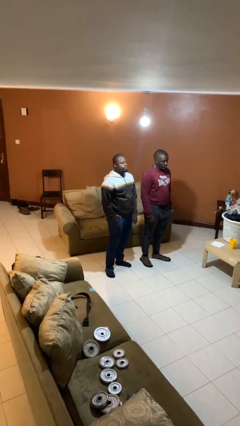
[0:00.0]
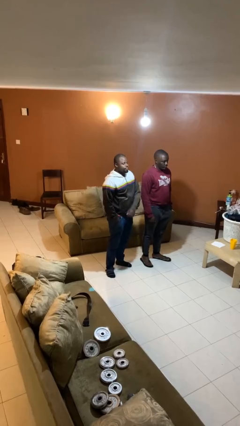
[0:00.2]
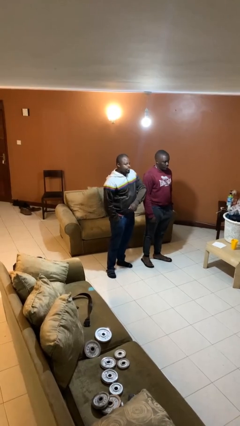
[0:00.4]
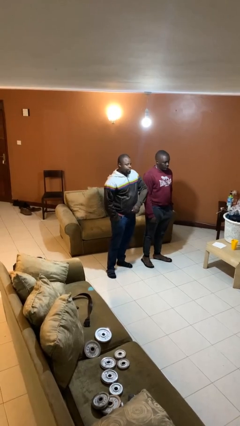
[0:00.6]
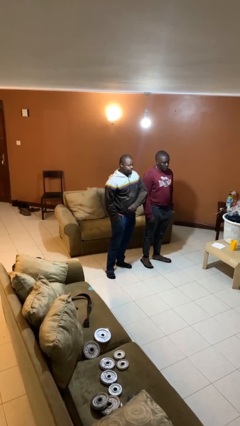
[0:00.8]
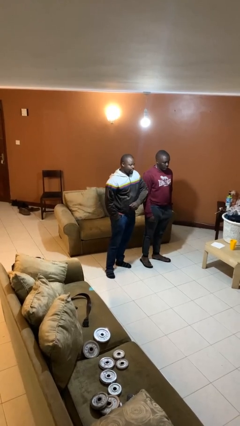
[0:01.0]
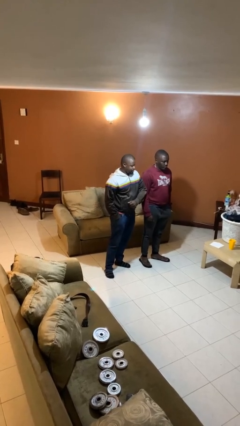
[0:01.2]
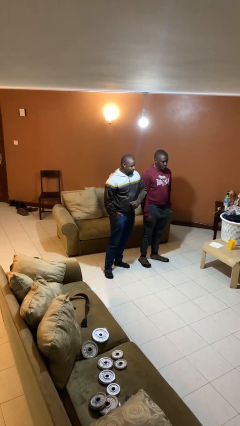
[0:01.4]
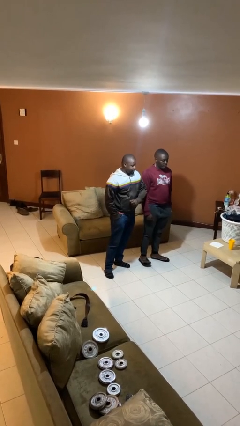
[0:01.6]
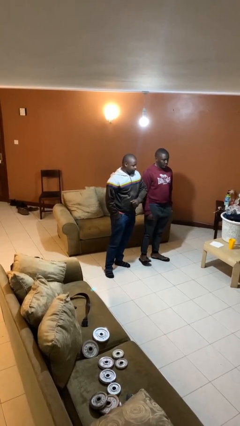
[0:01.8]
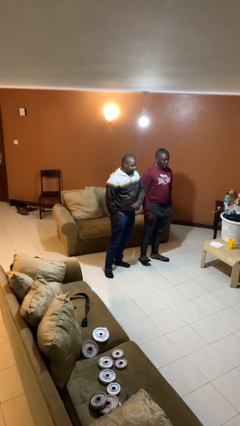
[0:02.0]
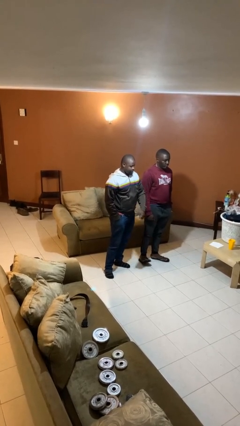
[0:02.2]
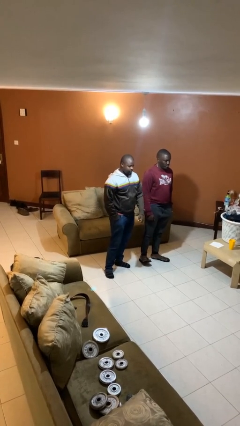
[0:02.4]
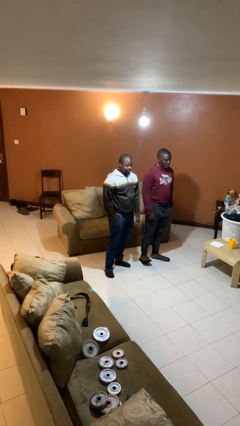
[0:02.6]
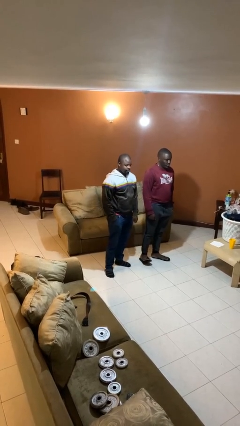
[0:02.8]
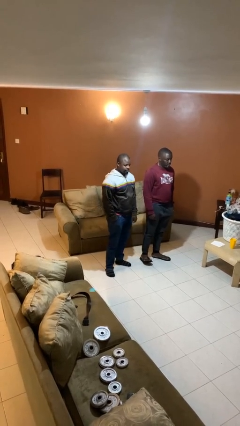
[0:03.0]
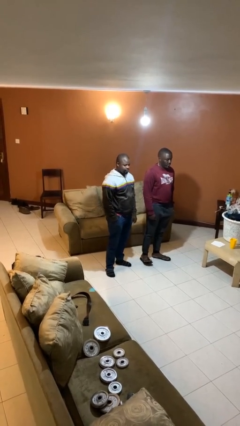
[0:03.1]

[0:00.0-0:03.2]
person nudges person with elbow

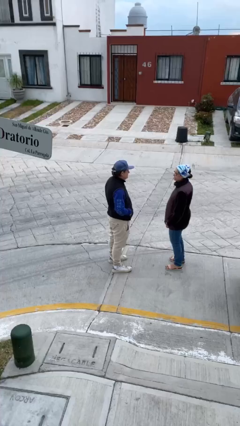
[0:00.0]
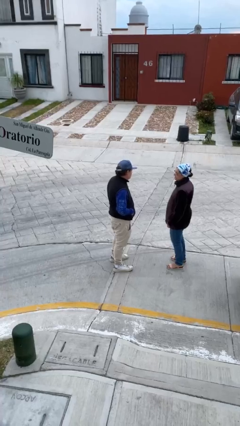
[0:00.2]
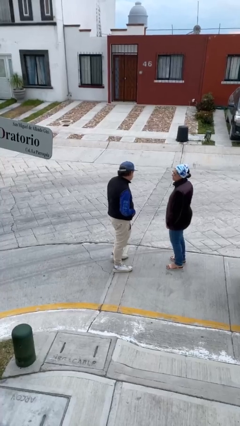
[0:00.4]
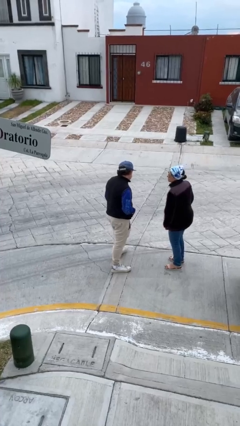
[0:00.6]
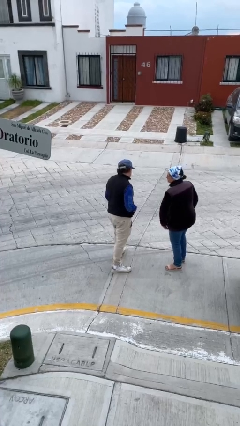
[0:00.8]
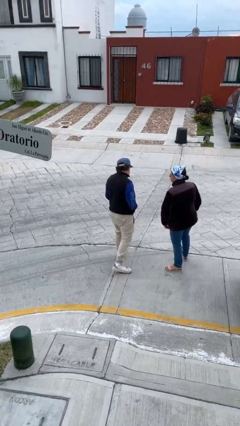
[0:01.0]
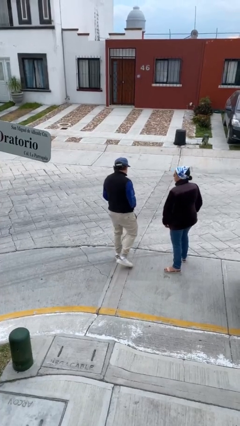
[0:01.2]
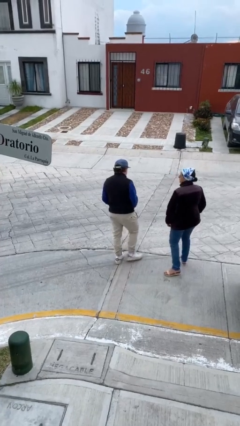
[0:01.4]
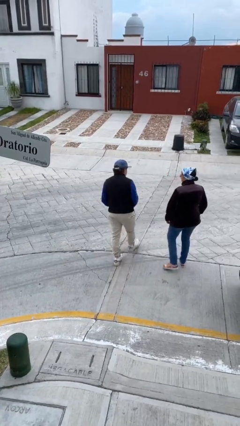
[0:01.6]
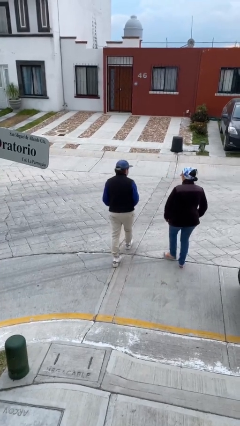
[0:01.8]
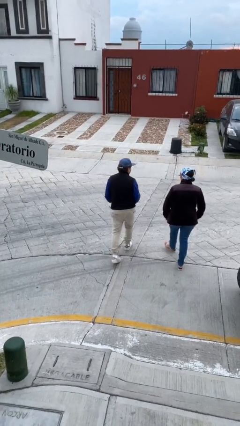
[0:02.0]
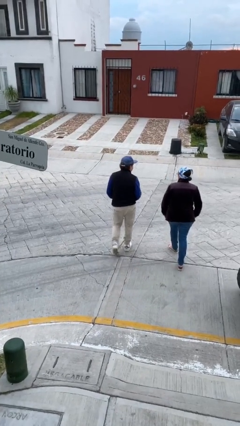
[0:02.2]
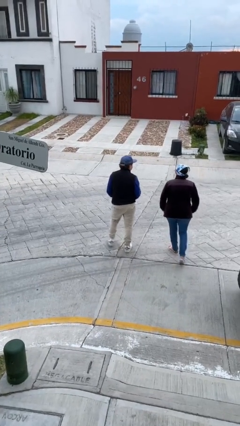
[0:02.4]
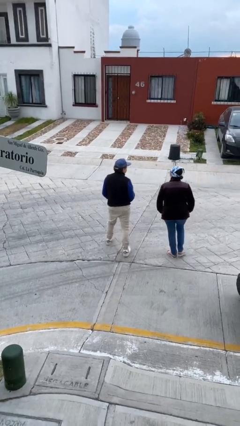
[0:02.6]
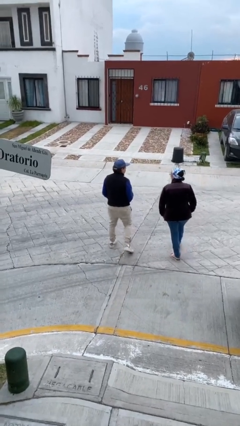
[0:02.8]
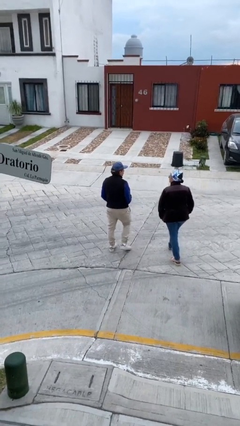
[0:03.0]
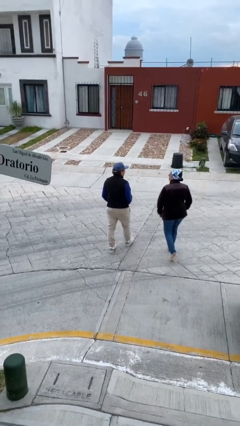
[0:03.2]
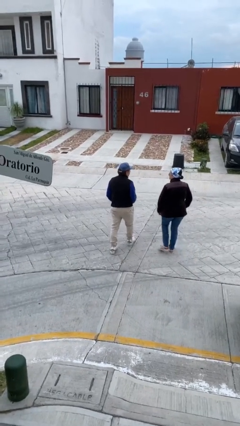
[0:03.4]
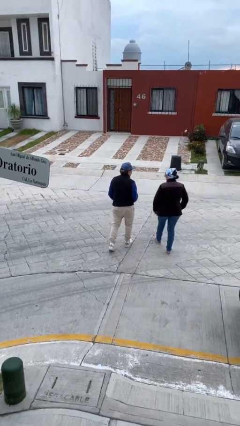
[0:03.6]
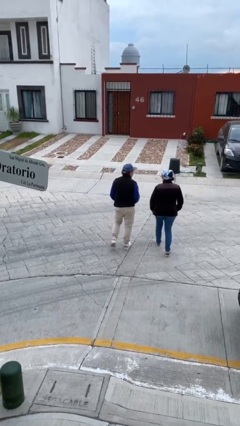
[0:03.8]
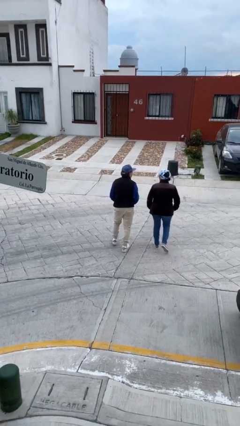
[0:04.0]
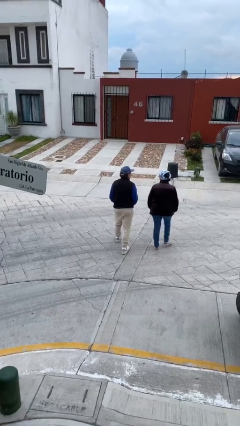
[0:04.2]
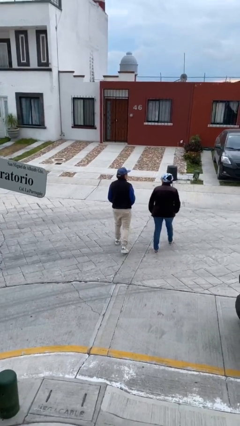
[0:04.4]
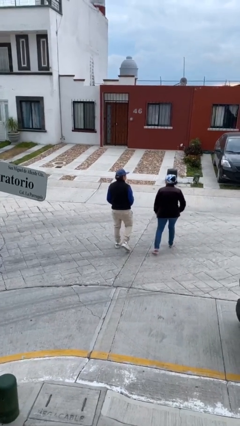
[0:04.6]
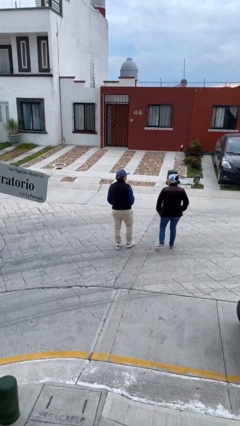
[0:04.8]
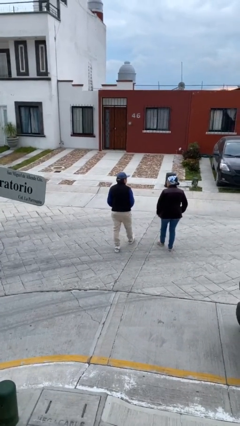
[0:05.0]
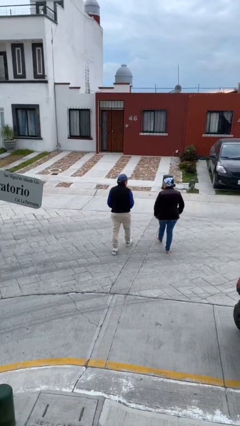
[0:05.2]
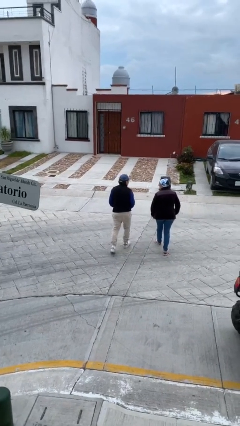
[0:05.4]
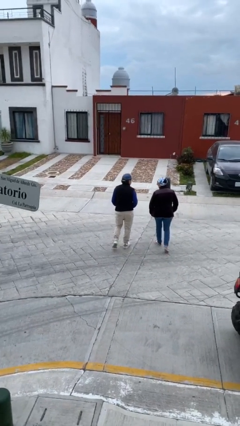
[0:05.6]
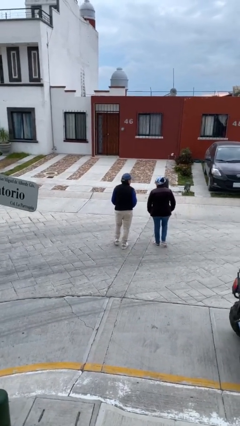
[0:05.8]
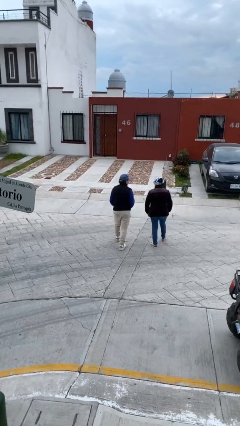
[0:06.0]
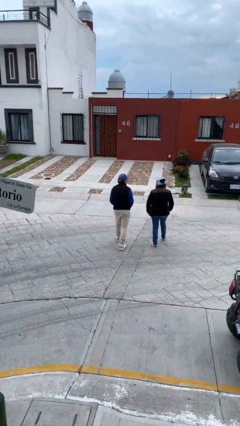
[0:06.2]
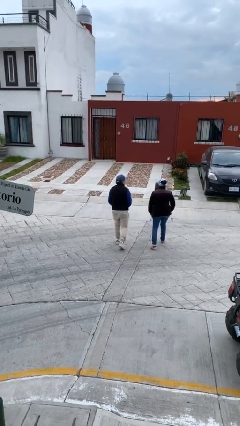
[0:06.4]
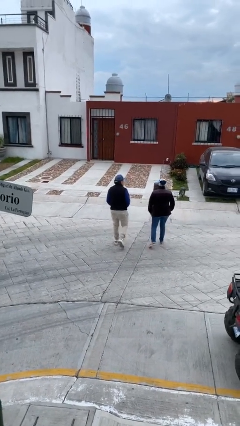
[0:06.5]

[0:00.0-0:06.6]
person talks to person

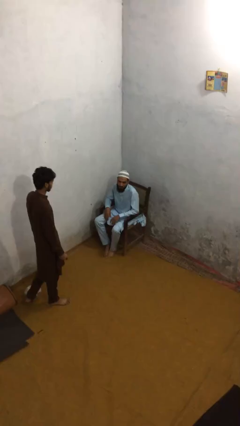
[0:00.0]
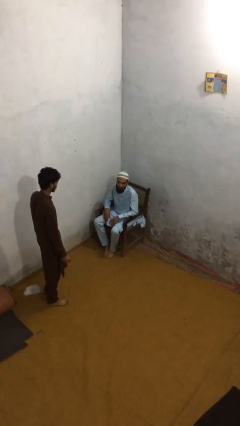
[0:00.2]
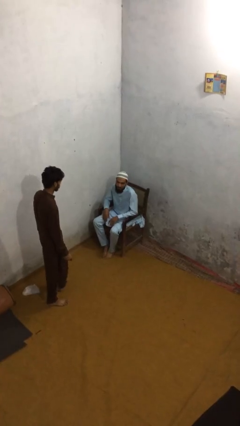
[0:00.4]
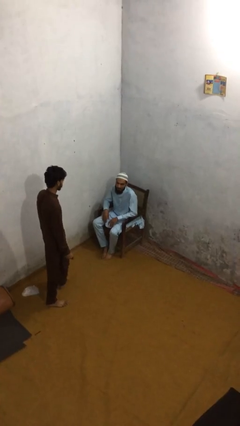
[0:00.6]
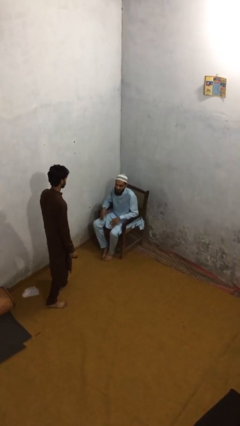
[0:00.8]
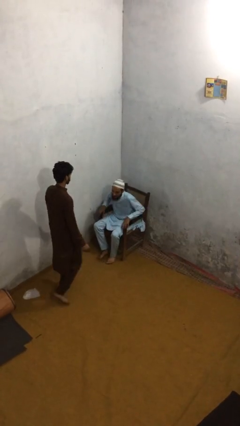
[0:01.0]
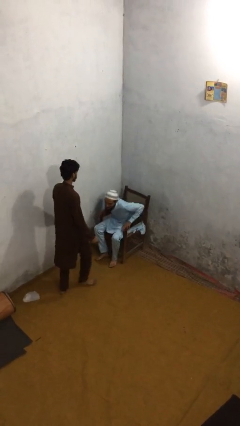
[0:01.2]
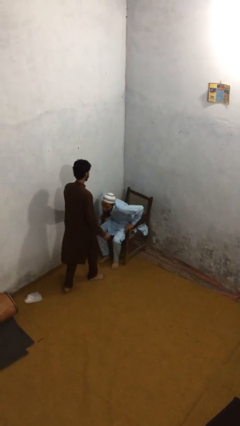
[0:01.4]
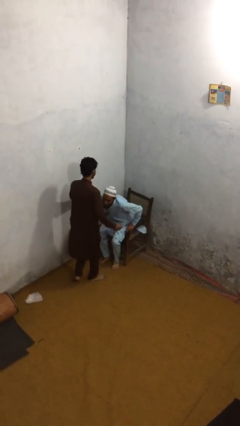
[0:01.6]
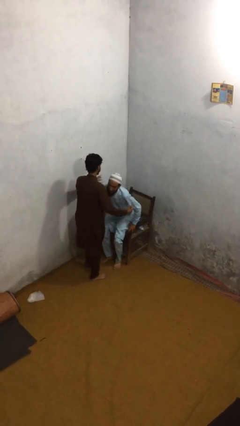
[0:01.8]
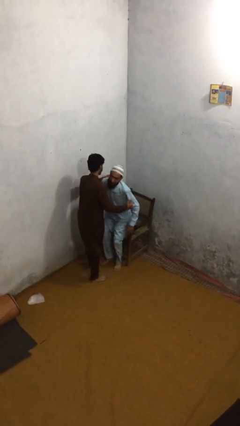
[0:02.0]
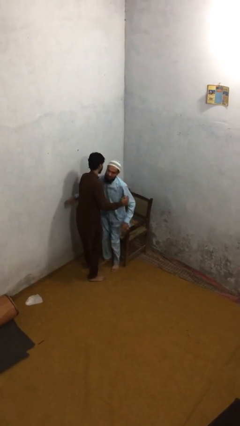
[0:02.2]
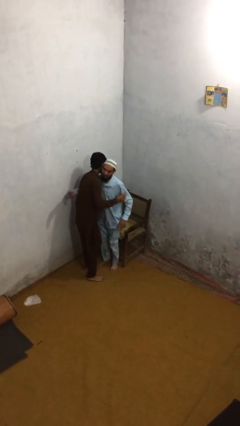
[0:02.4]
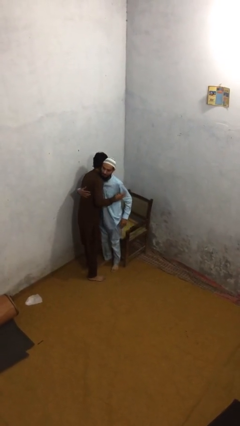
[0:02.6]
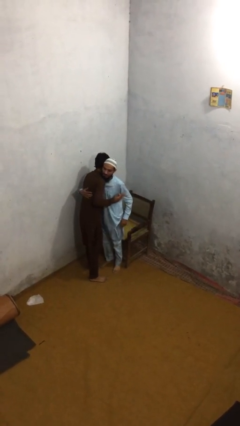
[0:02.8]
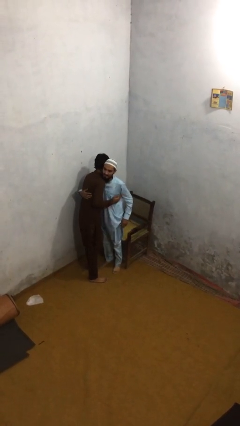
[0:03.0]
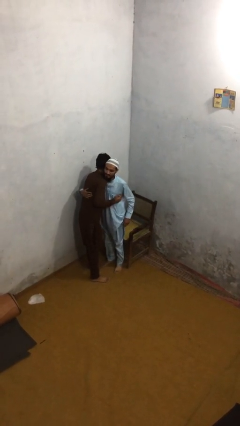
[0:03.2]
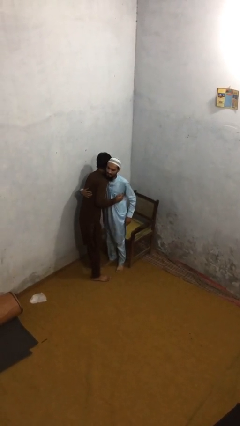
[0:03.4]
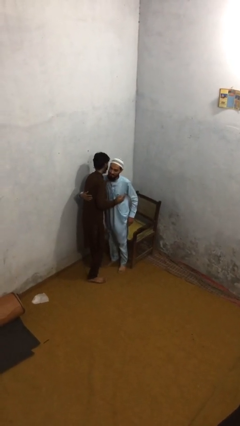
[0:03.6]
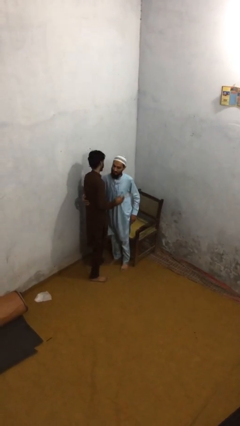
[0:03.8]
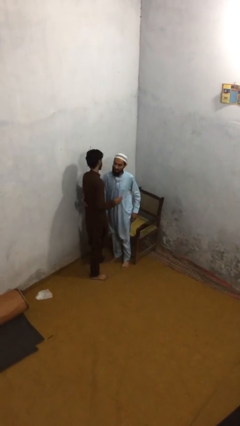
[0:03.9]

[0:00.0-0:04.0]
person embraces person

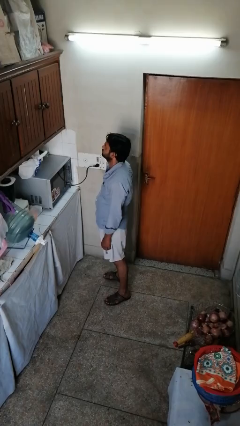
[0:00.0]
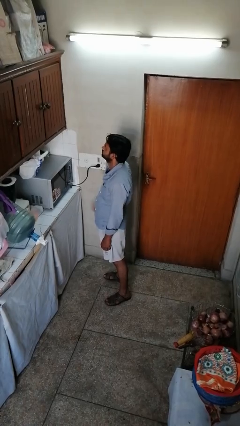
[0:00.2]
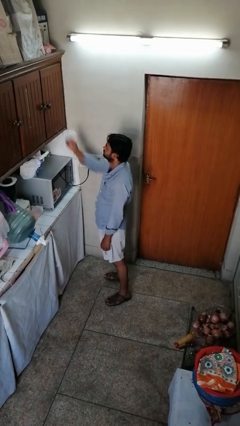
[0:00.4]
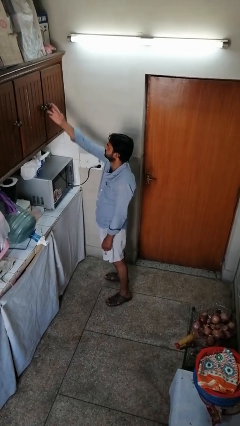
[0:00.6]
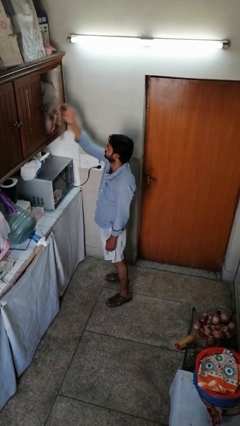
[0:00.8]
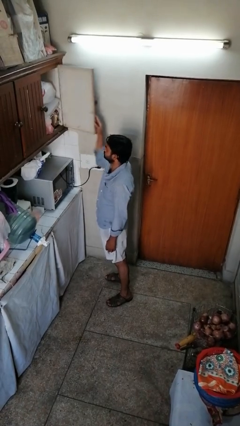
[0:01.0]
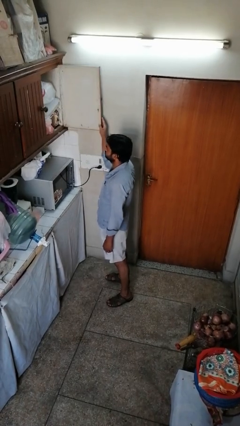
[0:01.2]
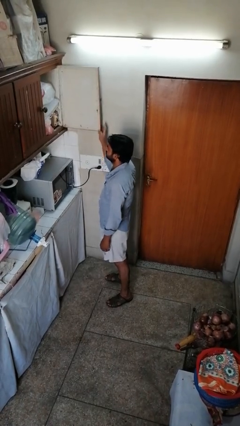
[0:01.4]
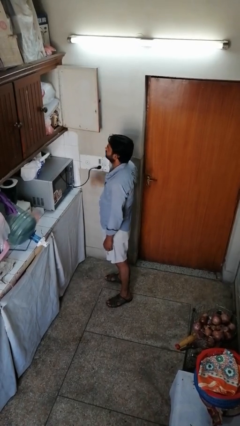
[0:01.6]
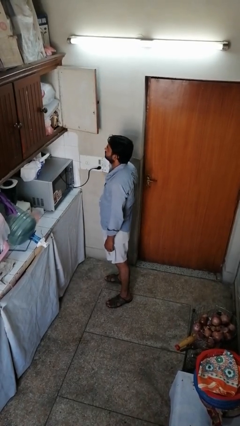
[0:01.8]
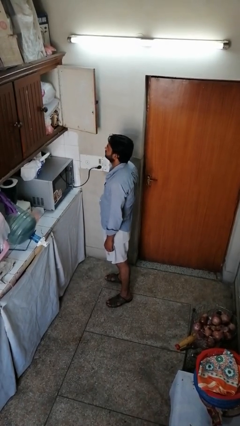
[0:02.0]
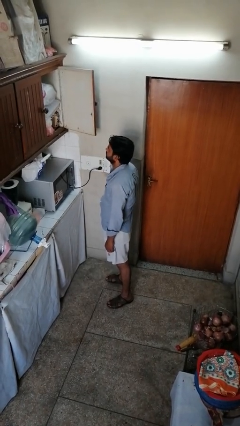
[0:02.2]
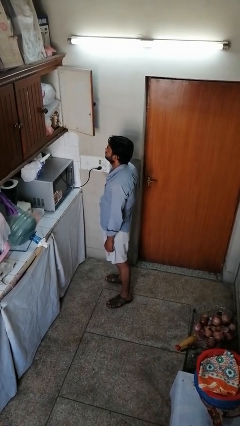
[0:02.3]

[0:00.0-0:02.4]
person opens cabinet

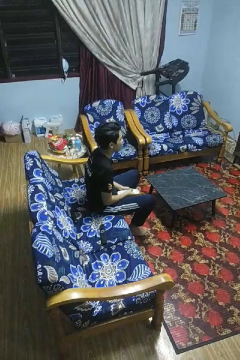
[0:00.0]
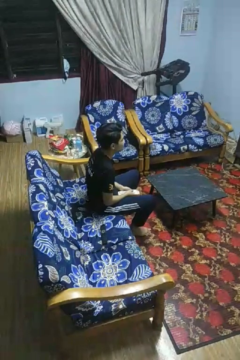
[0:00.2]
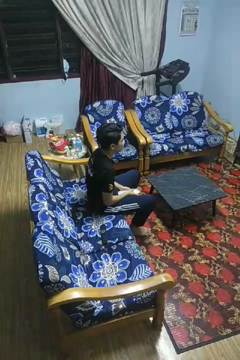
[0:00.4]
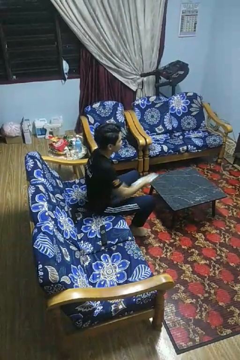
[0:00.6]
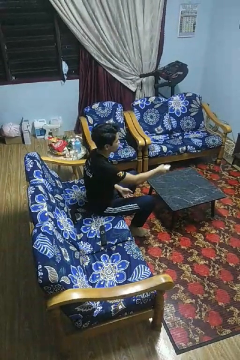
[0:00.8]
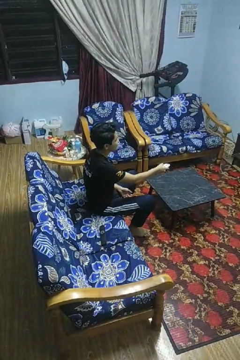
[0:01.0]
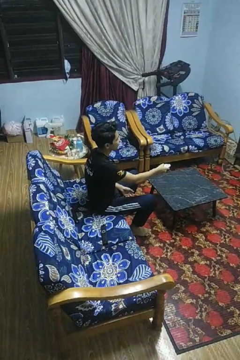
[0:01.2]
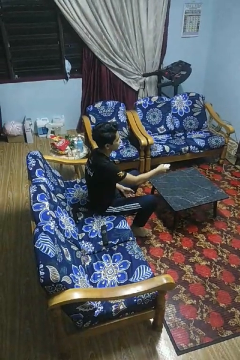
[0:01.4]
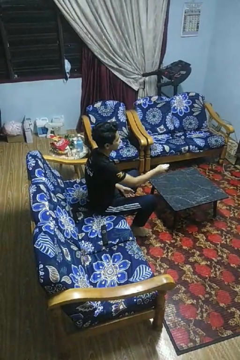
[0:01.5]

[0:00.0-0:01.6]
person uses television remote
